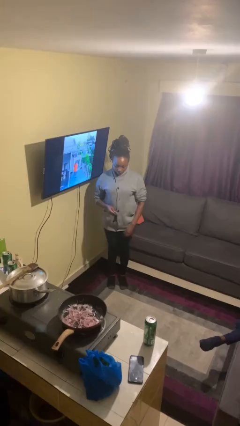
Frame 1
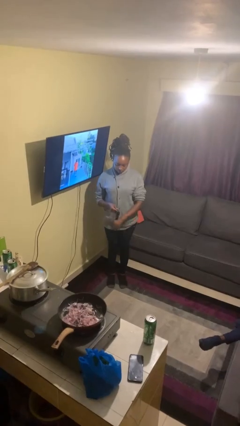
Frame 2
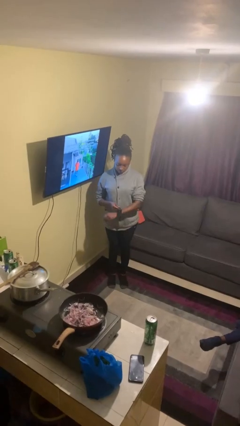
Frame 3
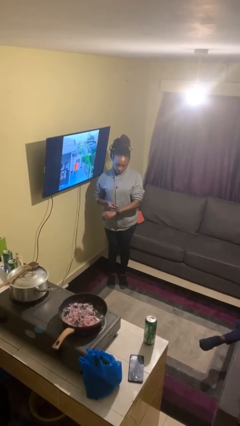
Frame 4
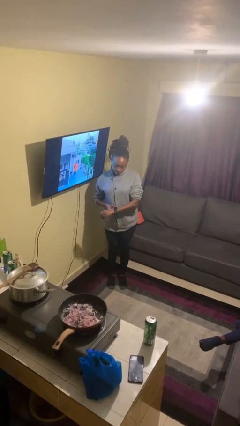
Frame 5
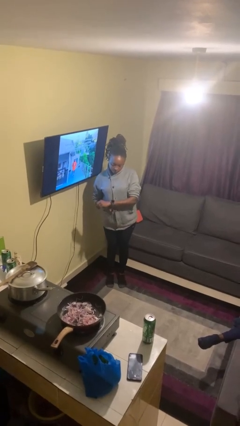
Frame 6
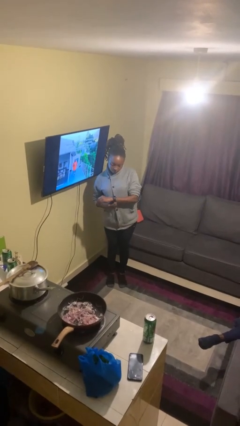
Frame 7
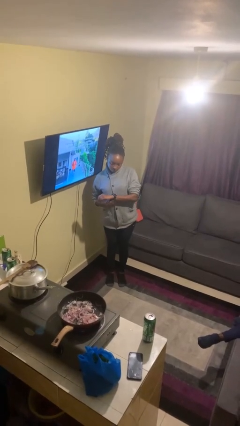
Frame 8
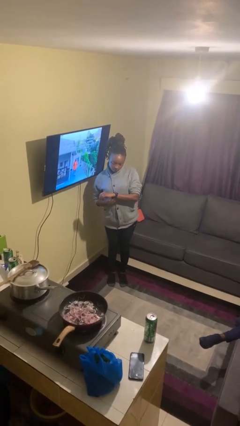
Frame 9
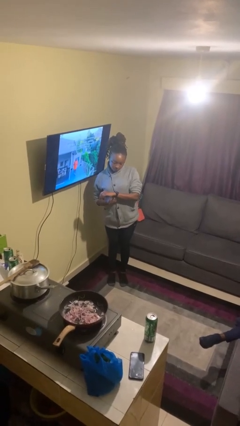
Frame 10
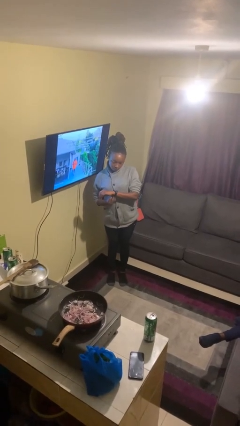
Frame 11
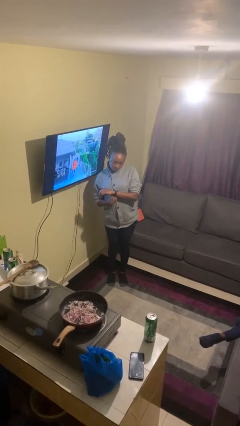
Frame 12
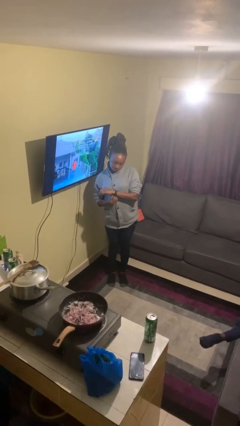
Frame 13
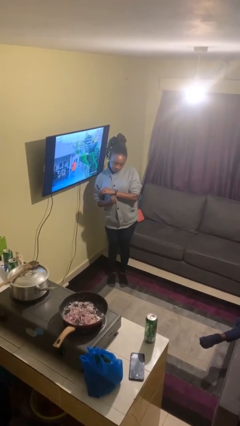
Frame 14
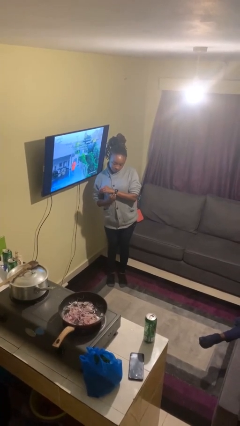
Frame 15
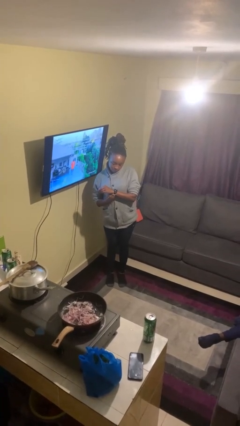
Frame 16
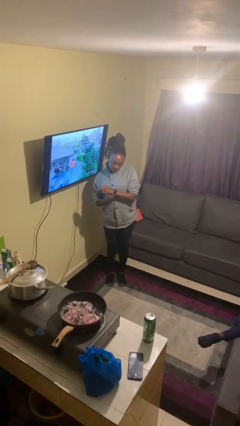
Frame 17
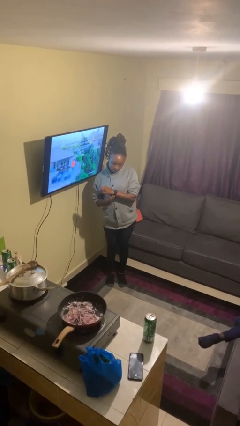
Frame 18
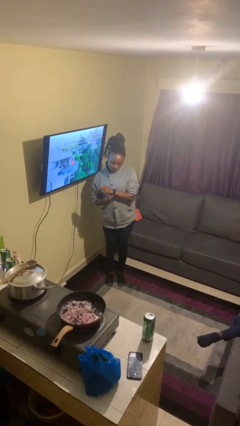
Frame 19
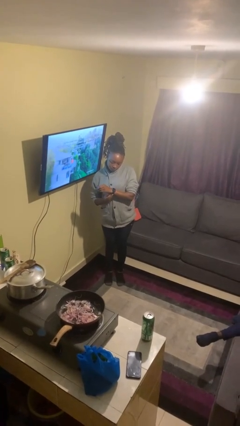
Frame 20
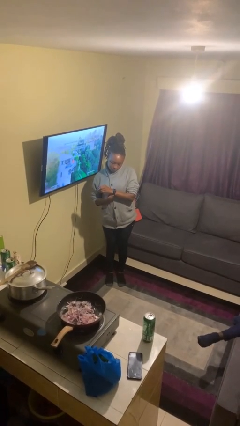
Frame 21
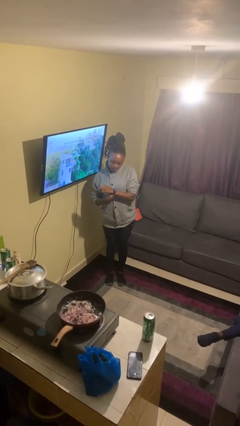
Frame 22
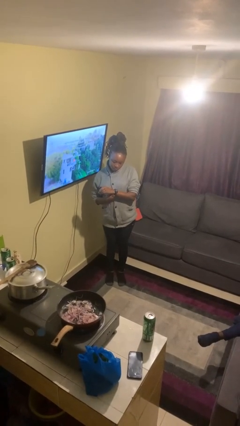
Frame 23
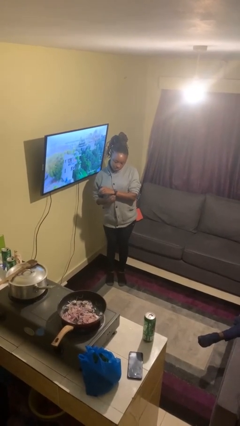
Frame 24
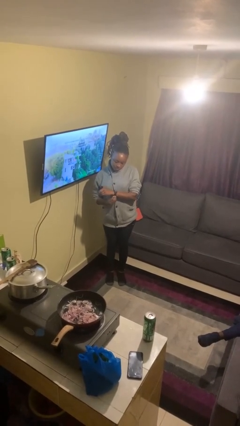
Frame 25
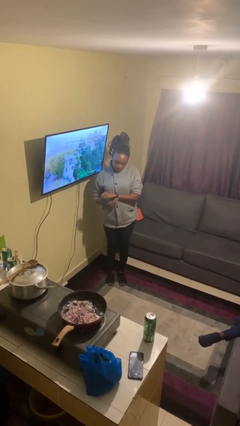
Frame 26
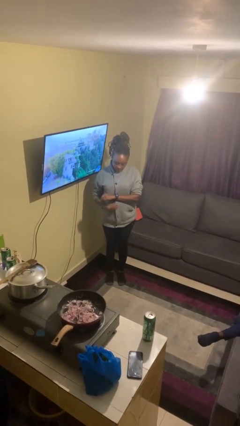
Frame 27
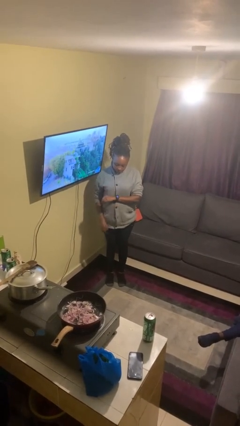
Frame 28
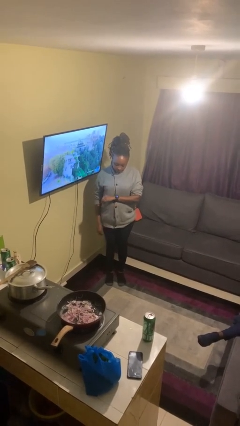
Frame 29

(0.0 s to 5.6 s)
person puts on wristwatch

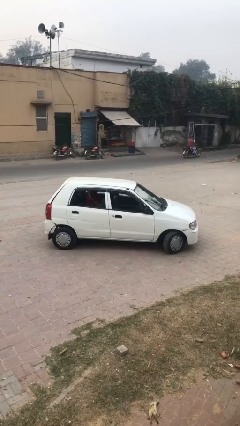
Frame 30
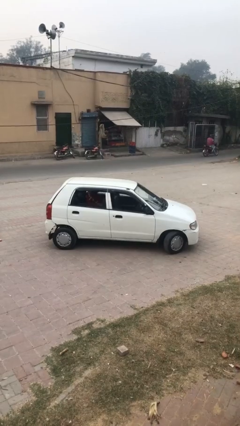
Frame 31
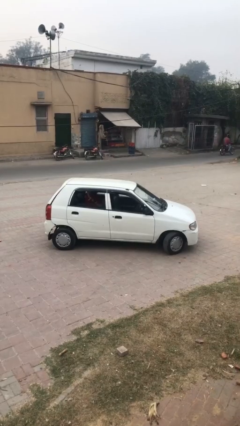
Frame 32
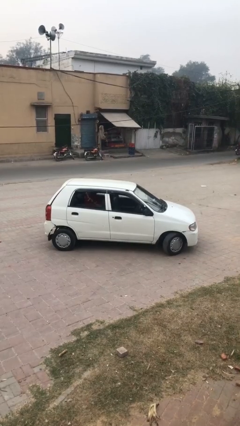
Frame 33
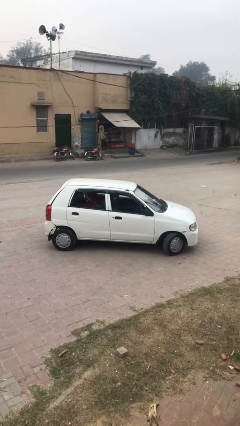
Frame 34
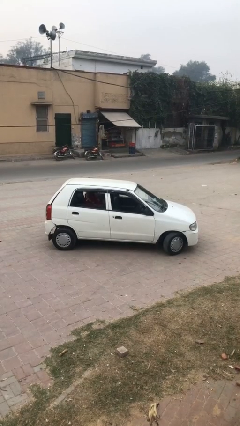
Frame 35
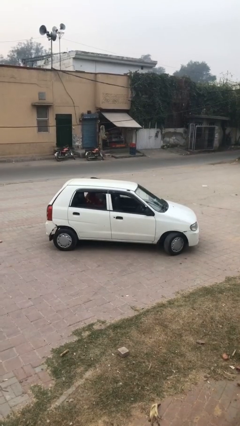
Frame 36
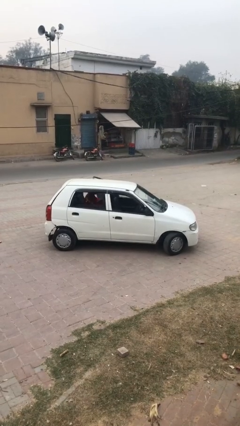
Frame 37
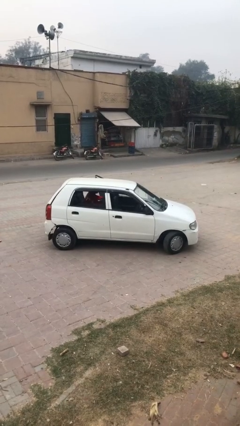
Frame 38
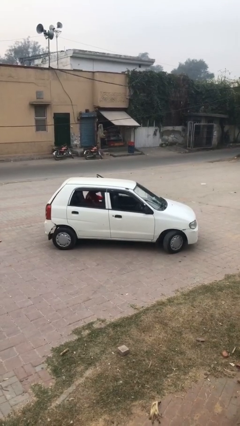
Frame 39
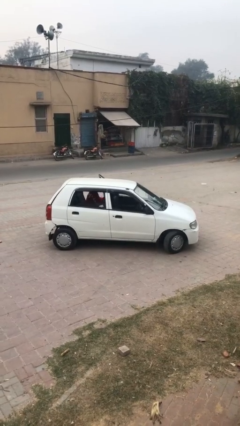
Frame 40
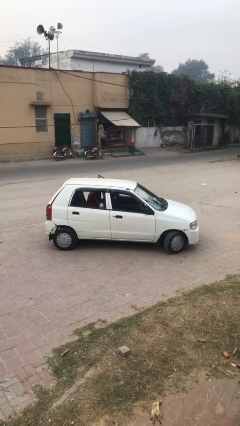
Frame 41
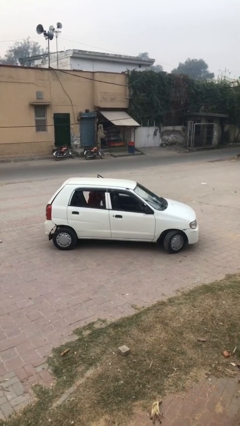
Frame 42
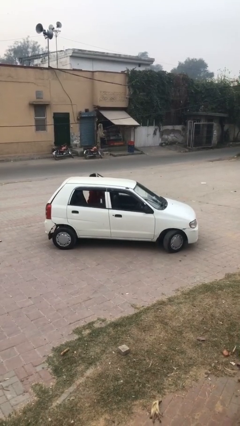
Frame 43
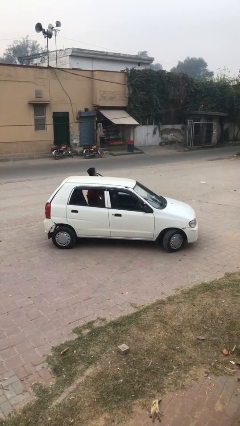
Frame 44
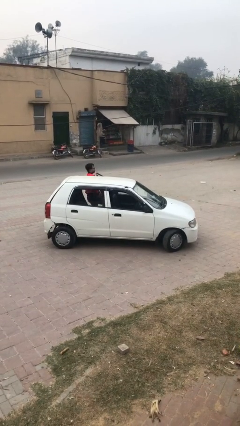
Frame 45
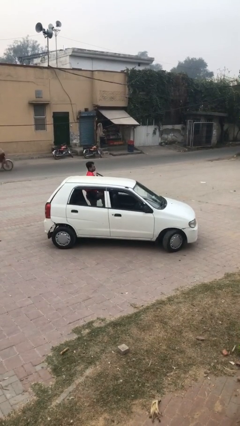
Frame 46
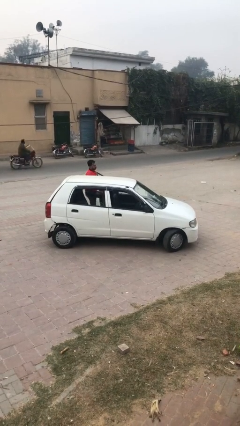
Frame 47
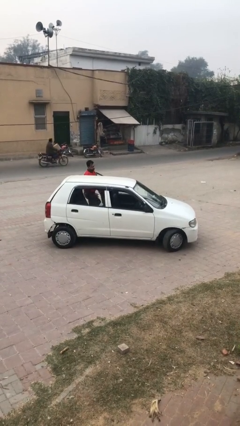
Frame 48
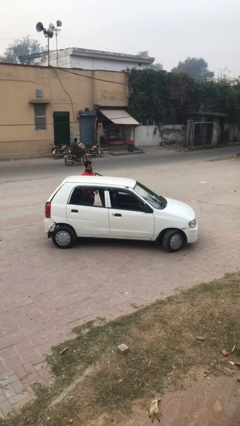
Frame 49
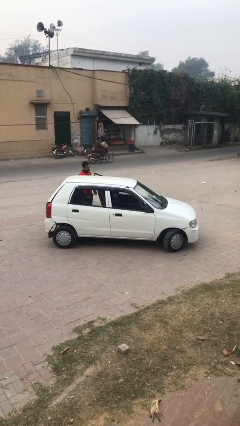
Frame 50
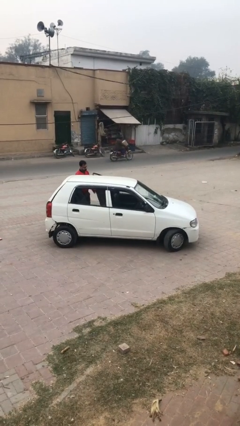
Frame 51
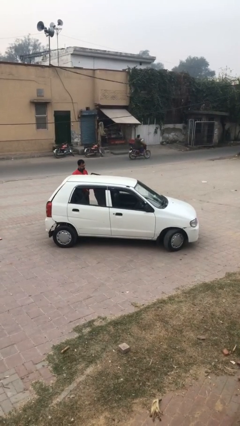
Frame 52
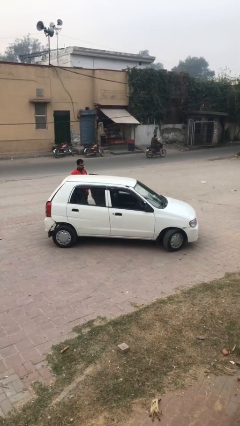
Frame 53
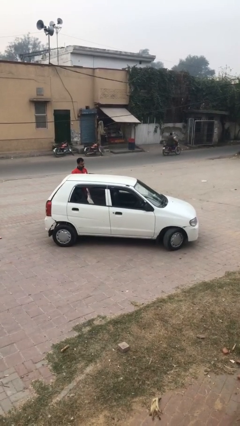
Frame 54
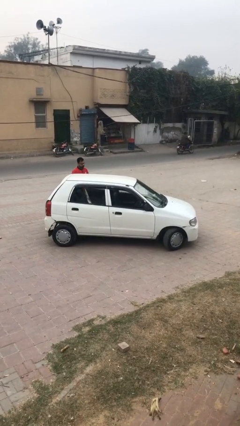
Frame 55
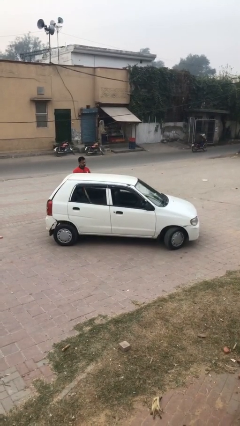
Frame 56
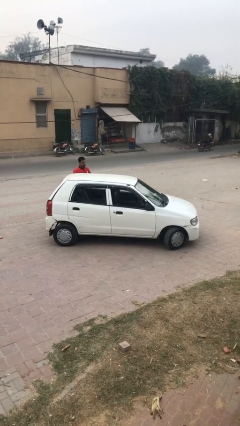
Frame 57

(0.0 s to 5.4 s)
car drops off person

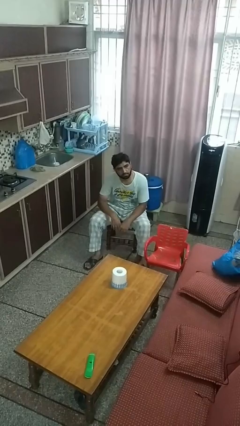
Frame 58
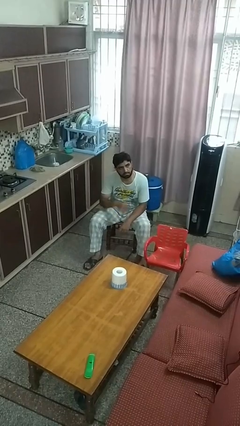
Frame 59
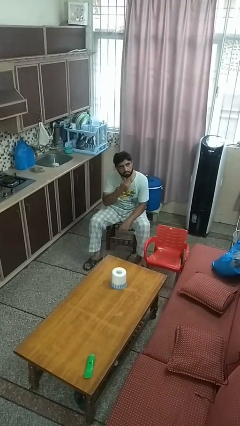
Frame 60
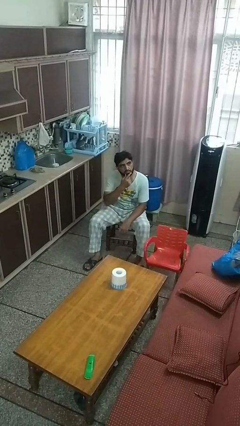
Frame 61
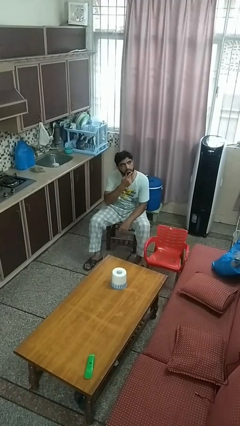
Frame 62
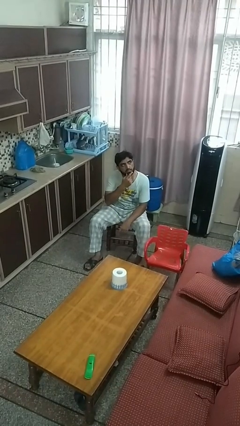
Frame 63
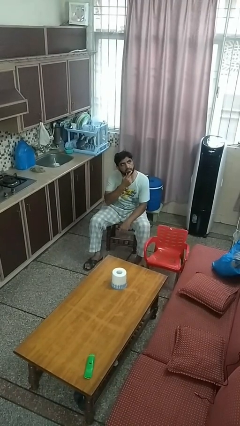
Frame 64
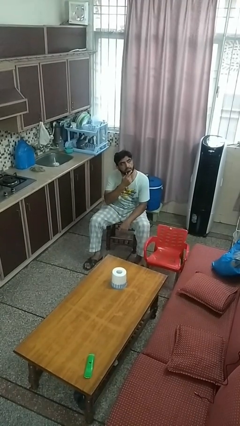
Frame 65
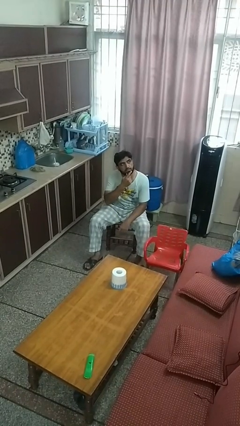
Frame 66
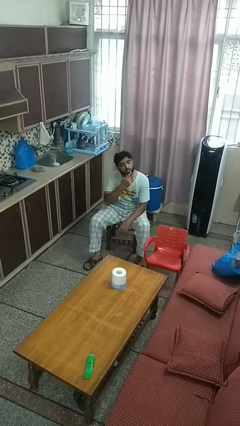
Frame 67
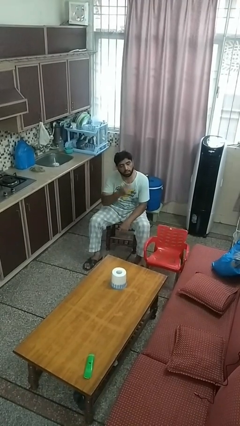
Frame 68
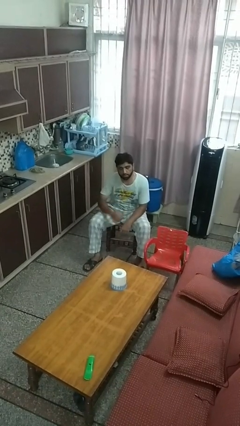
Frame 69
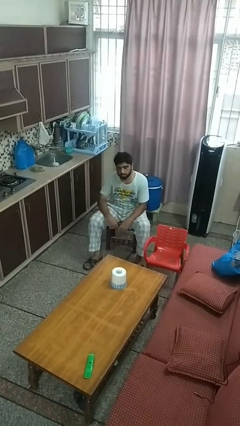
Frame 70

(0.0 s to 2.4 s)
person strokes chin

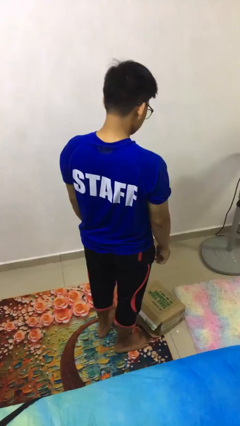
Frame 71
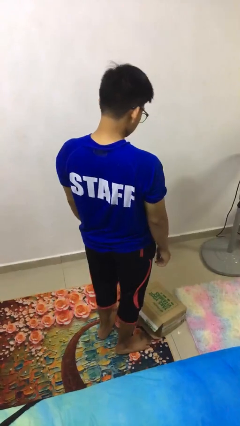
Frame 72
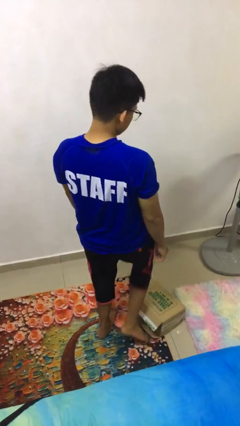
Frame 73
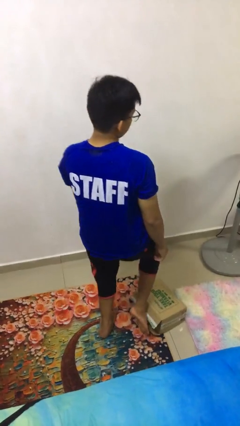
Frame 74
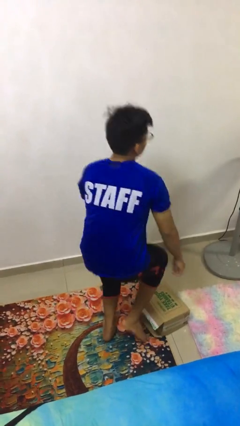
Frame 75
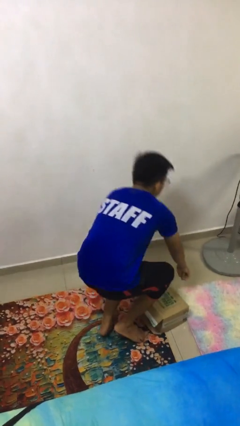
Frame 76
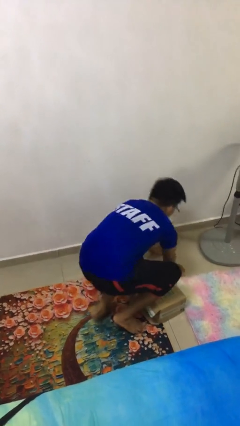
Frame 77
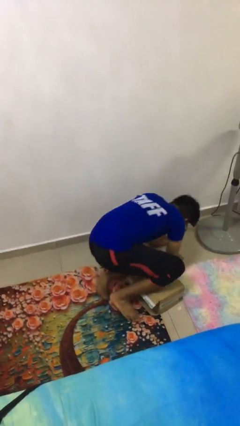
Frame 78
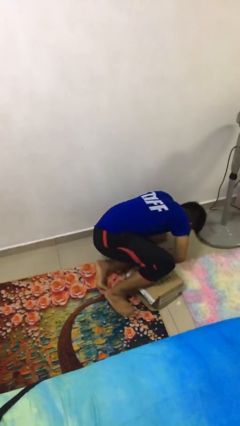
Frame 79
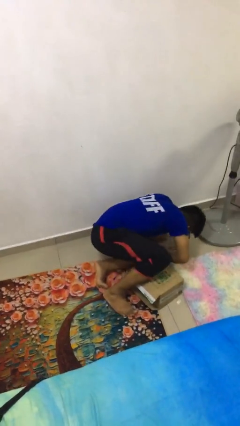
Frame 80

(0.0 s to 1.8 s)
person trips on object on floor

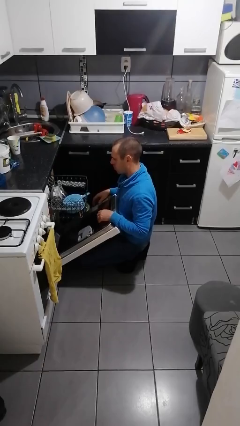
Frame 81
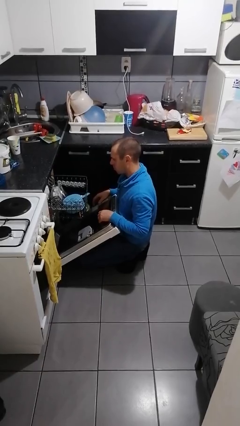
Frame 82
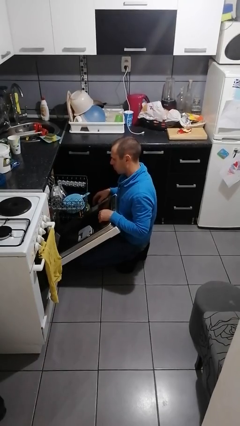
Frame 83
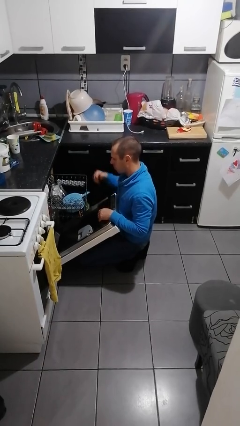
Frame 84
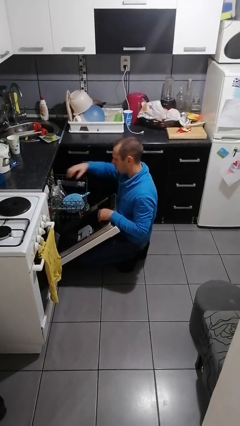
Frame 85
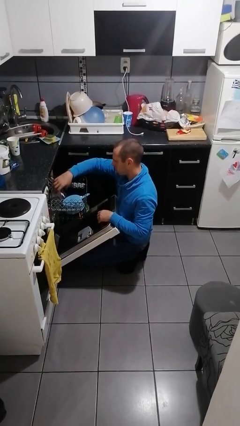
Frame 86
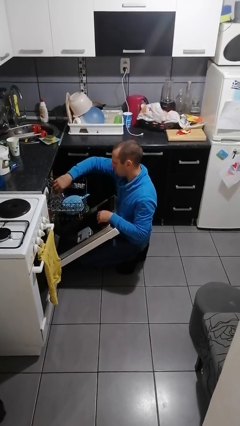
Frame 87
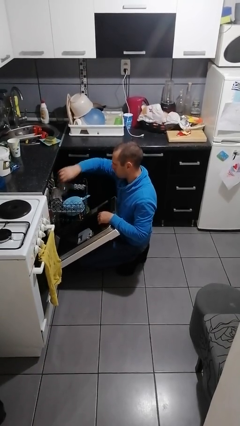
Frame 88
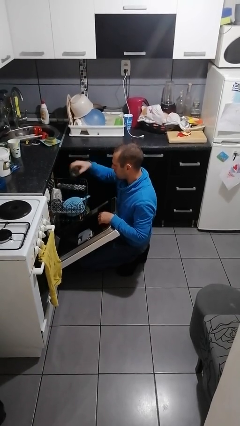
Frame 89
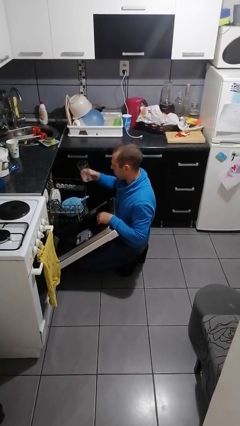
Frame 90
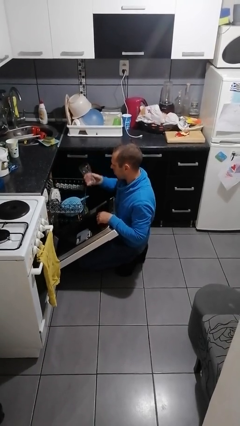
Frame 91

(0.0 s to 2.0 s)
person unloads dishwasher
